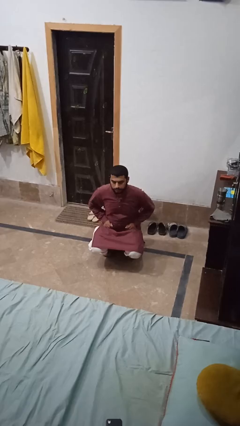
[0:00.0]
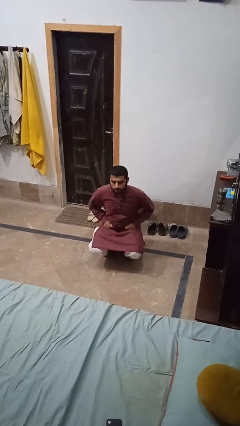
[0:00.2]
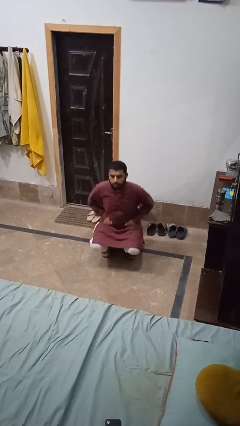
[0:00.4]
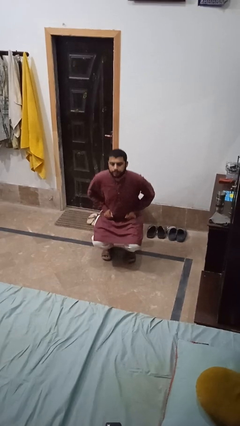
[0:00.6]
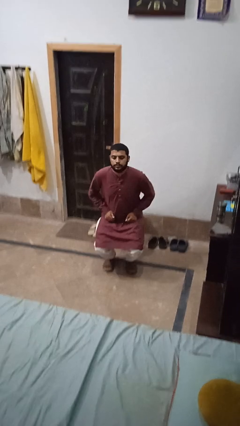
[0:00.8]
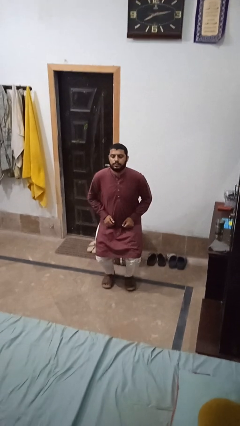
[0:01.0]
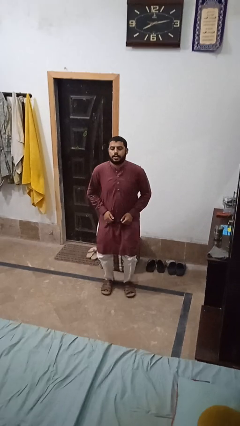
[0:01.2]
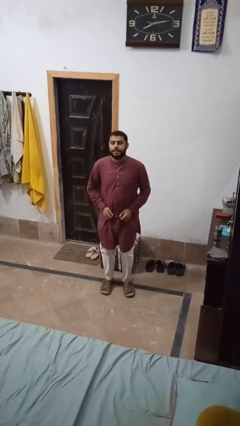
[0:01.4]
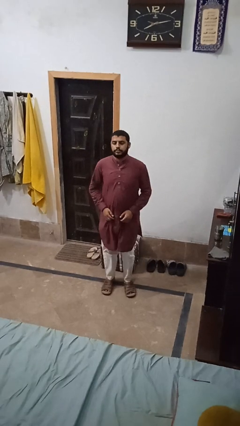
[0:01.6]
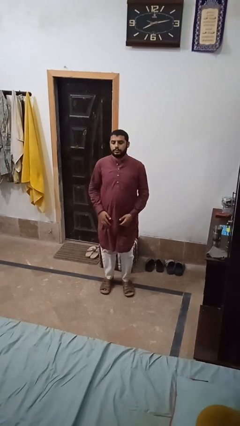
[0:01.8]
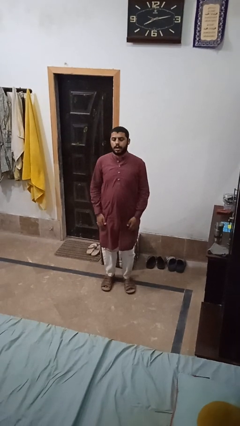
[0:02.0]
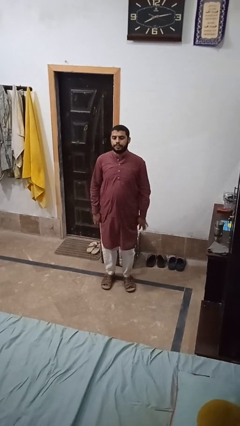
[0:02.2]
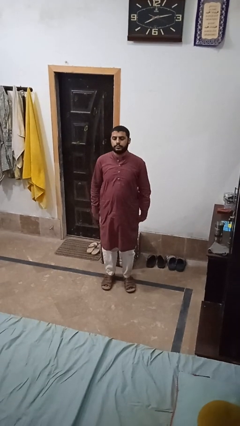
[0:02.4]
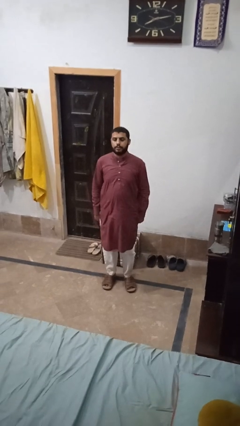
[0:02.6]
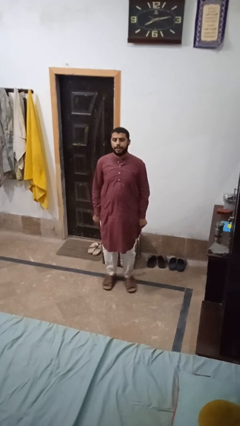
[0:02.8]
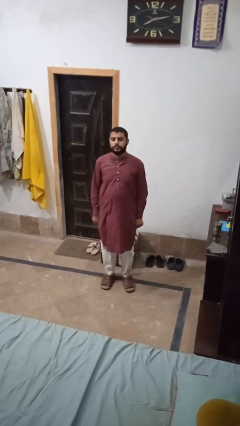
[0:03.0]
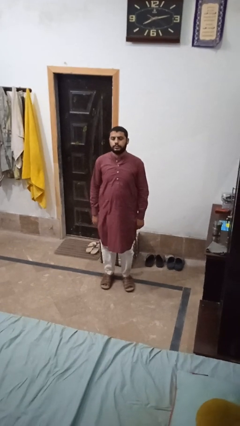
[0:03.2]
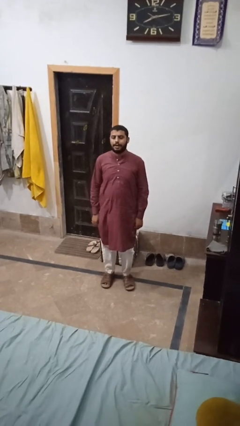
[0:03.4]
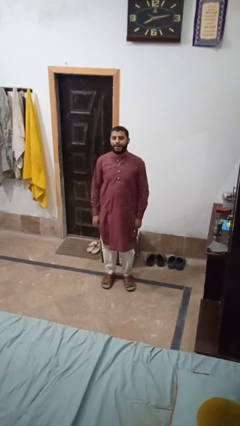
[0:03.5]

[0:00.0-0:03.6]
person stands up

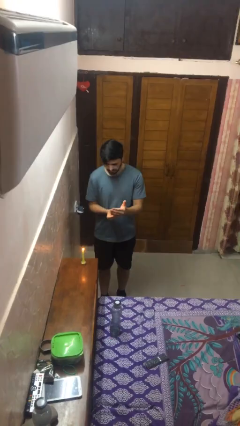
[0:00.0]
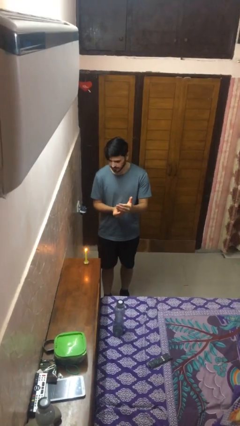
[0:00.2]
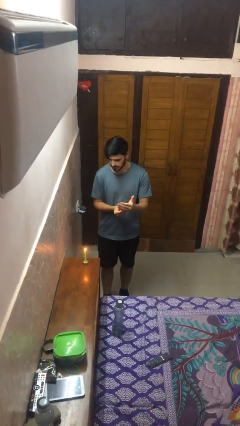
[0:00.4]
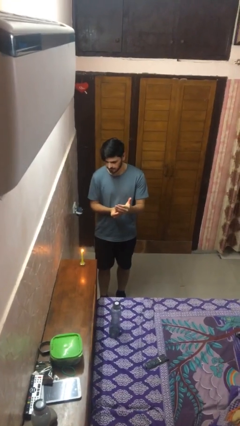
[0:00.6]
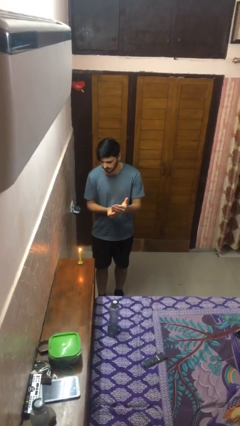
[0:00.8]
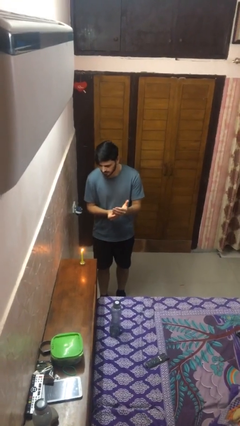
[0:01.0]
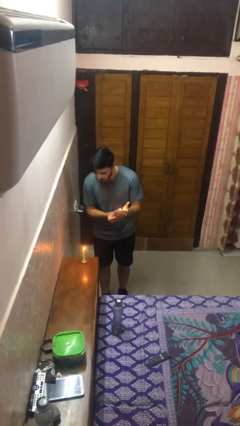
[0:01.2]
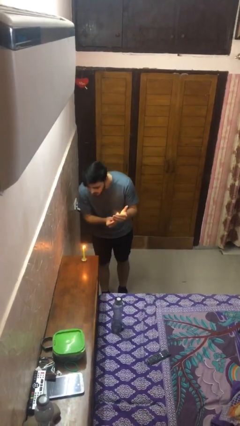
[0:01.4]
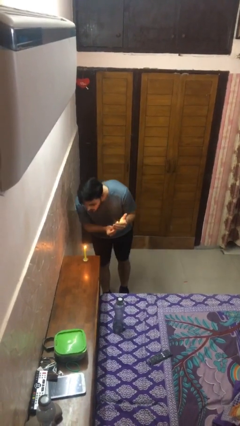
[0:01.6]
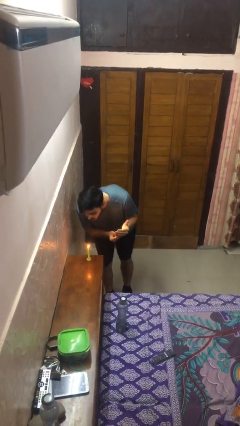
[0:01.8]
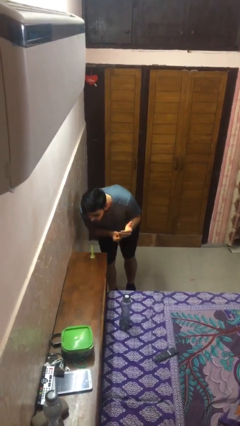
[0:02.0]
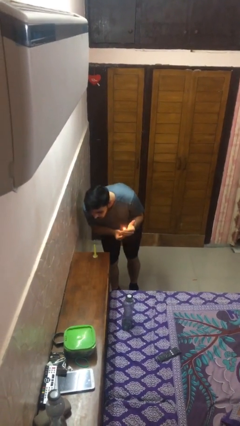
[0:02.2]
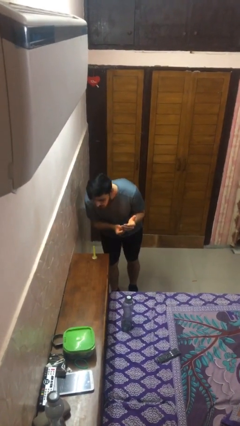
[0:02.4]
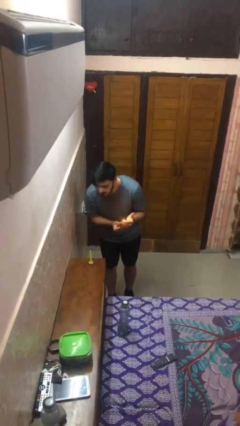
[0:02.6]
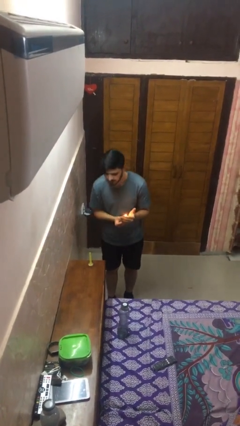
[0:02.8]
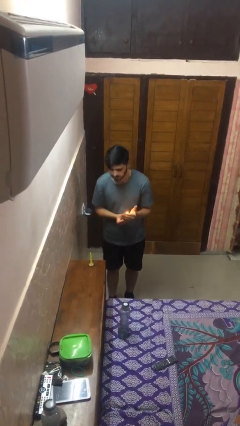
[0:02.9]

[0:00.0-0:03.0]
person extinguishes candle

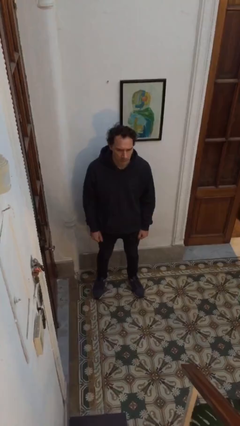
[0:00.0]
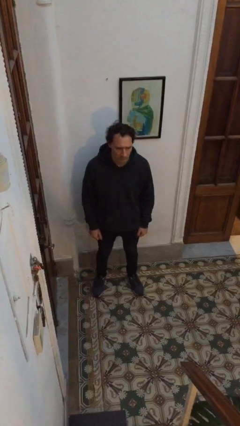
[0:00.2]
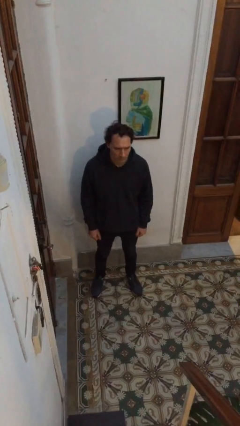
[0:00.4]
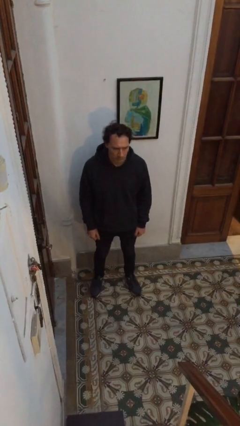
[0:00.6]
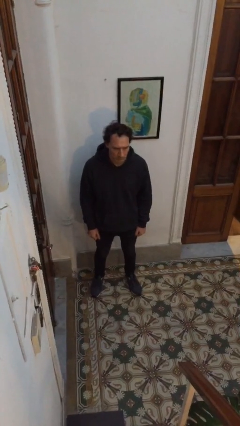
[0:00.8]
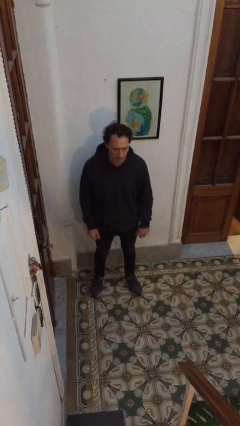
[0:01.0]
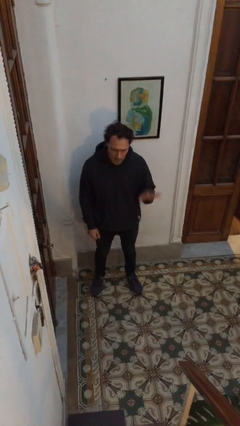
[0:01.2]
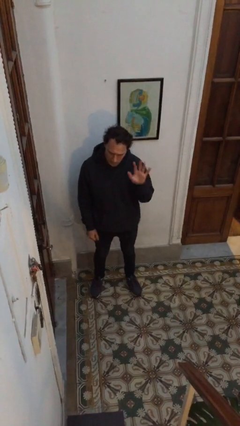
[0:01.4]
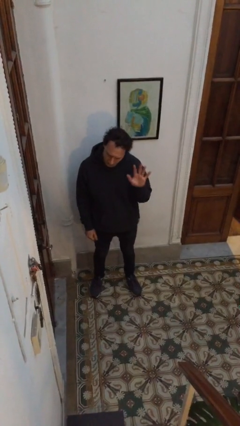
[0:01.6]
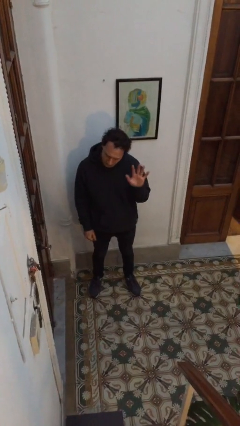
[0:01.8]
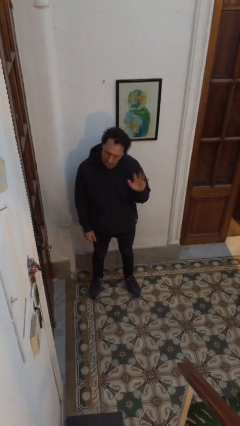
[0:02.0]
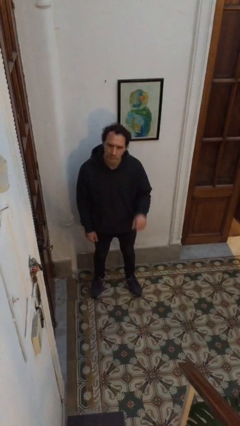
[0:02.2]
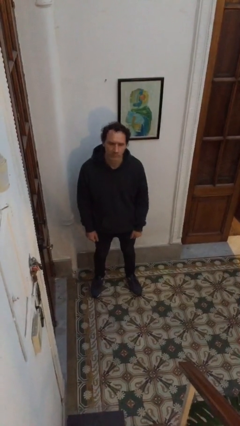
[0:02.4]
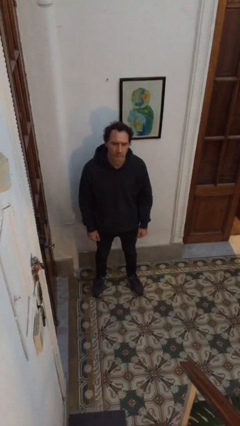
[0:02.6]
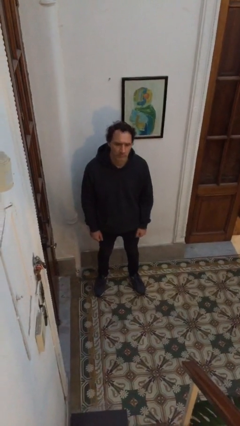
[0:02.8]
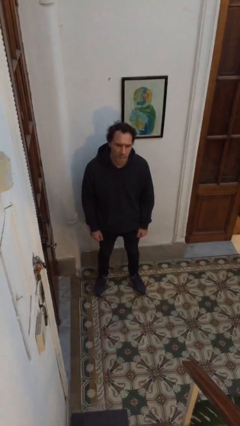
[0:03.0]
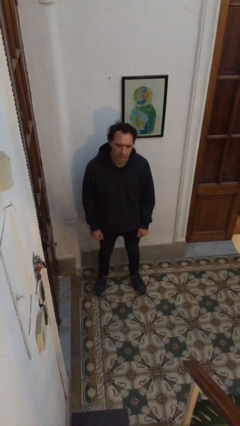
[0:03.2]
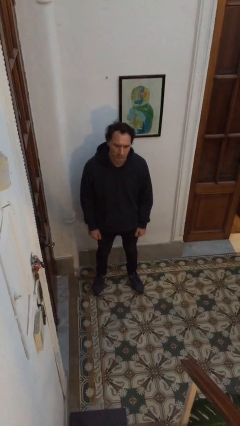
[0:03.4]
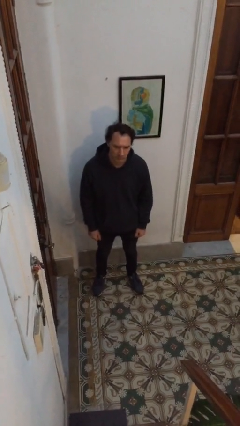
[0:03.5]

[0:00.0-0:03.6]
person gestures number five

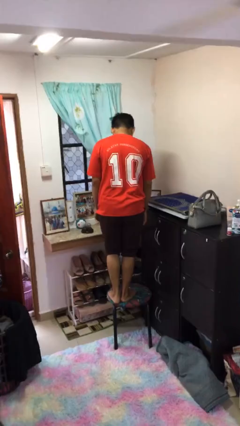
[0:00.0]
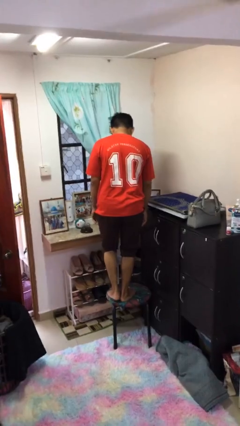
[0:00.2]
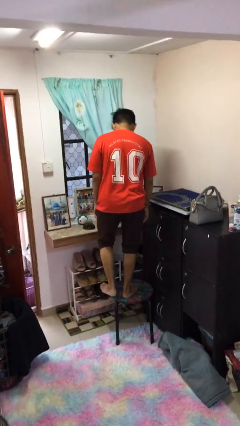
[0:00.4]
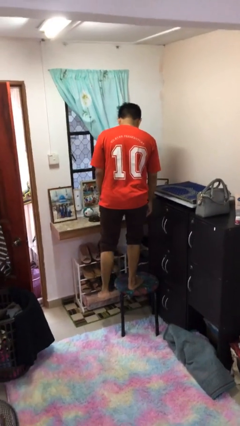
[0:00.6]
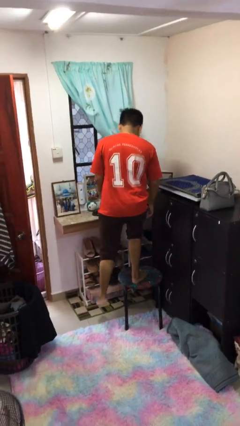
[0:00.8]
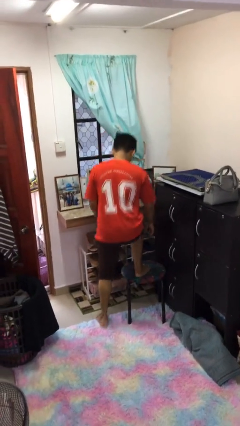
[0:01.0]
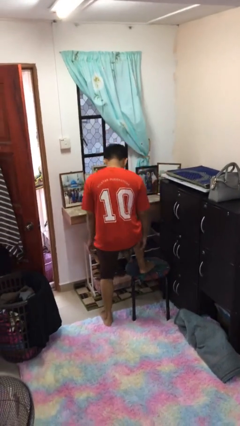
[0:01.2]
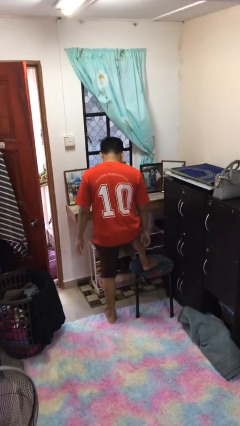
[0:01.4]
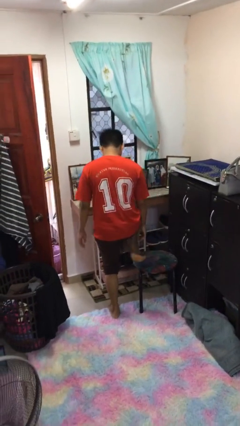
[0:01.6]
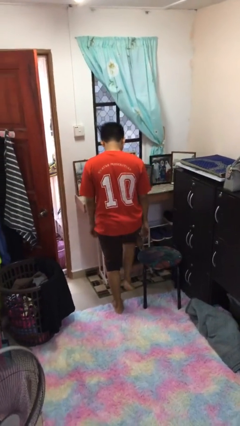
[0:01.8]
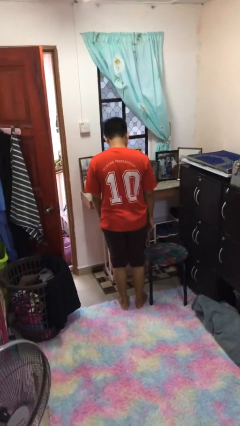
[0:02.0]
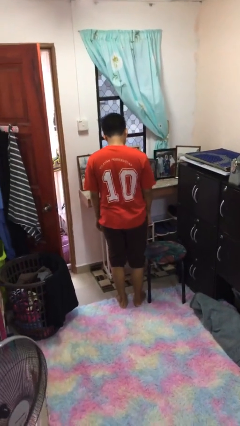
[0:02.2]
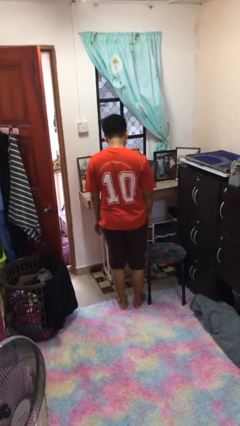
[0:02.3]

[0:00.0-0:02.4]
person climbs off chair

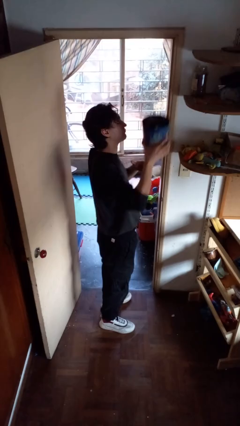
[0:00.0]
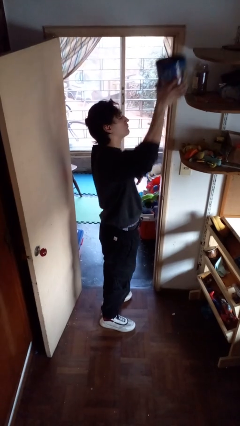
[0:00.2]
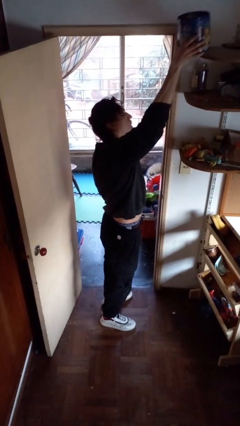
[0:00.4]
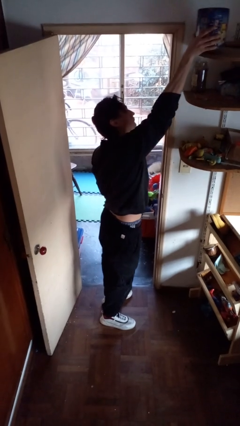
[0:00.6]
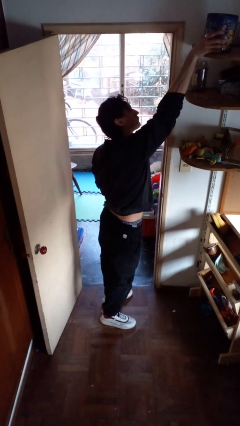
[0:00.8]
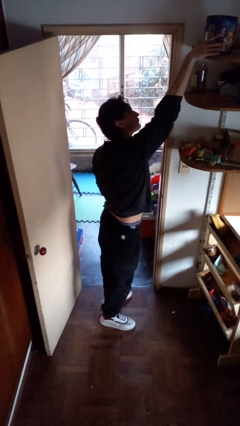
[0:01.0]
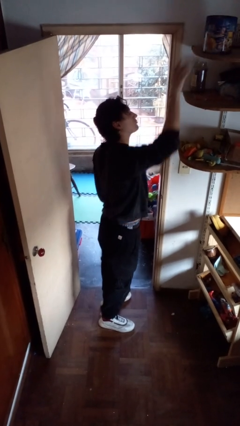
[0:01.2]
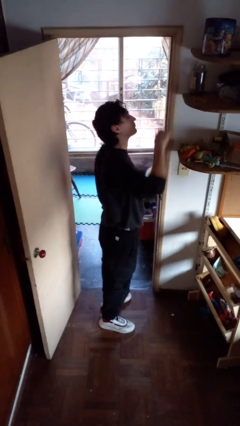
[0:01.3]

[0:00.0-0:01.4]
person puts down object on shelf

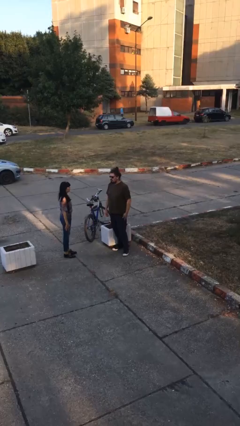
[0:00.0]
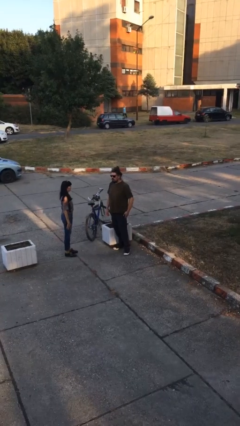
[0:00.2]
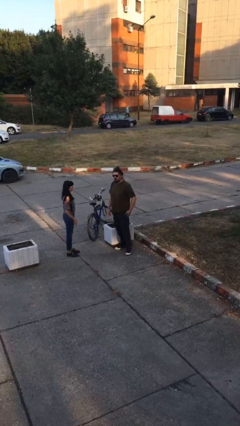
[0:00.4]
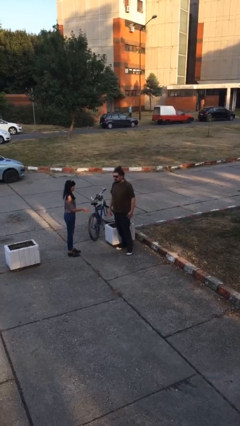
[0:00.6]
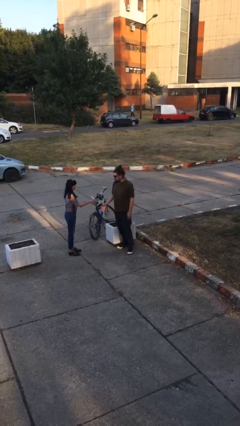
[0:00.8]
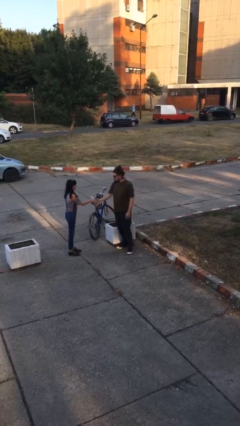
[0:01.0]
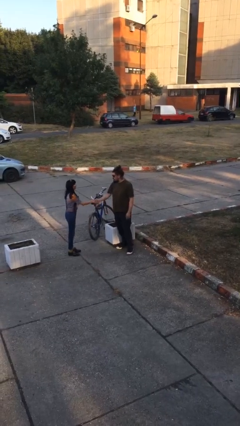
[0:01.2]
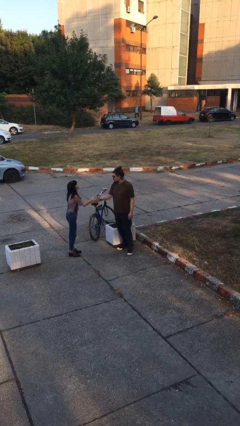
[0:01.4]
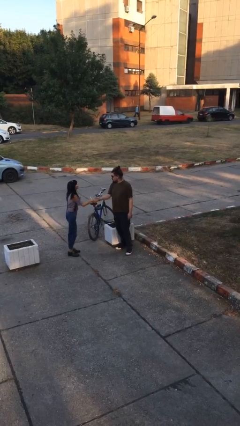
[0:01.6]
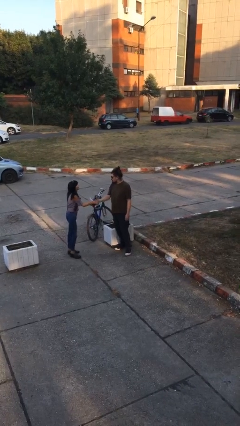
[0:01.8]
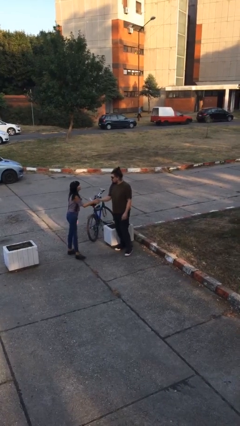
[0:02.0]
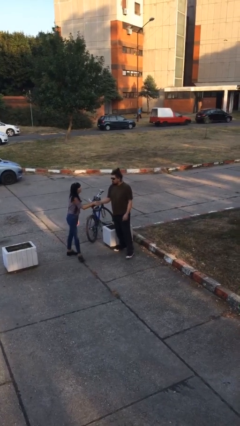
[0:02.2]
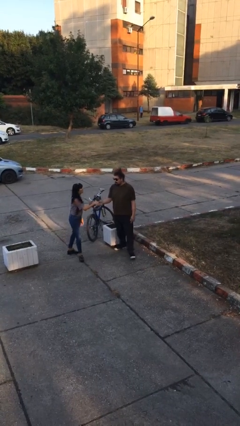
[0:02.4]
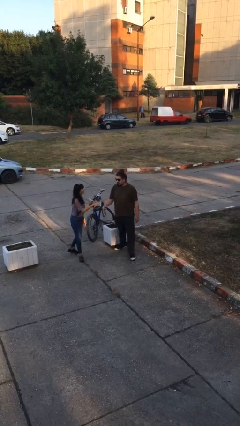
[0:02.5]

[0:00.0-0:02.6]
person shakes hand

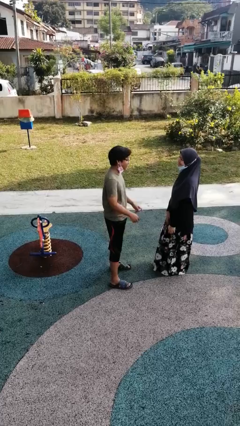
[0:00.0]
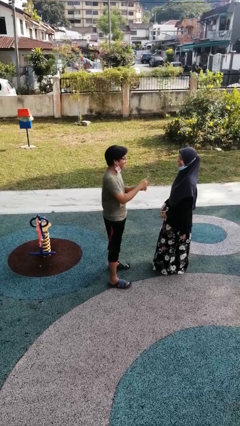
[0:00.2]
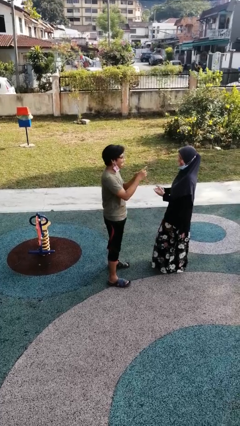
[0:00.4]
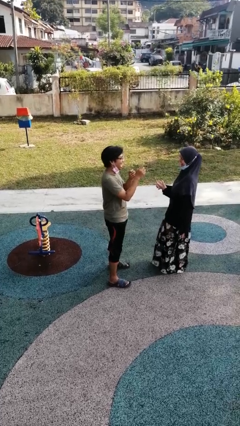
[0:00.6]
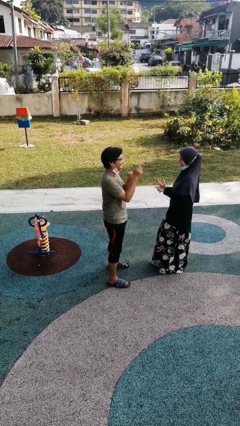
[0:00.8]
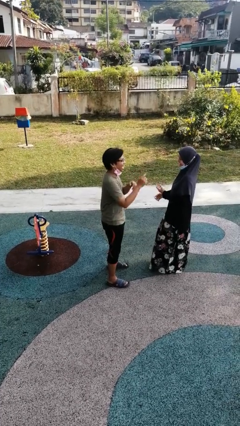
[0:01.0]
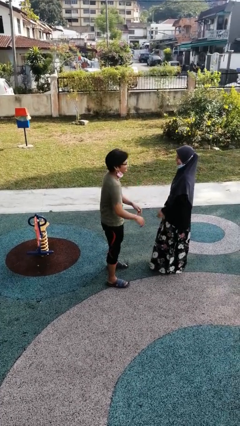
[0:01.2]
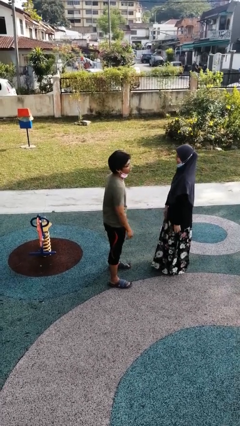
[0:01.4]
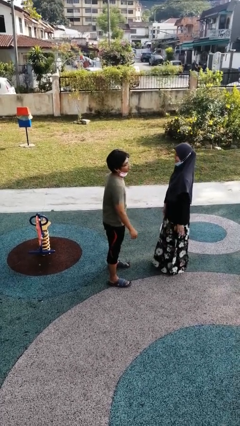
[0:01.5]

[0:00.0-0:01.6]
person laughs with person
